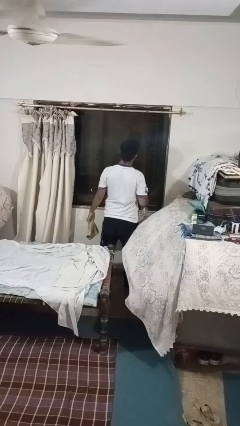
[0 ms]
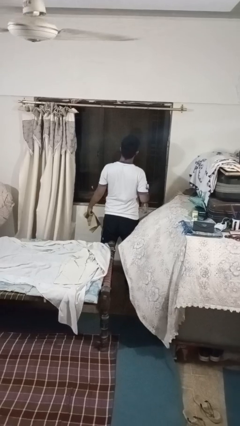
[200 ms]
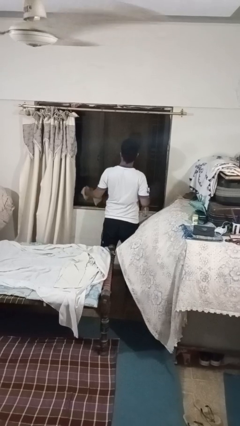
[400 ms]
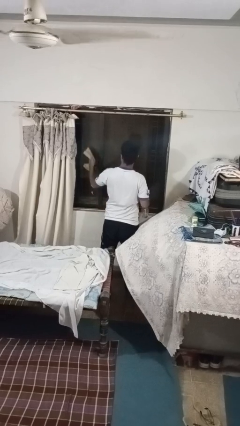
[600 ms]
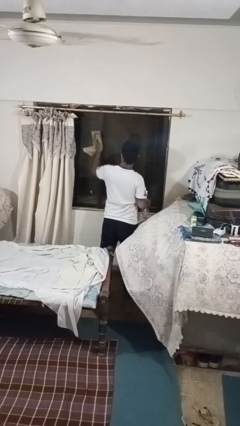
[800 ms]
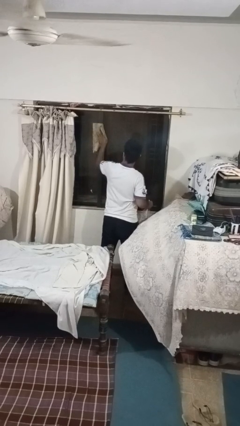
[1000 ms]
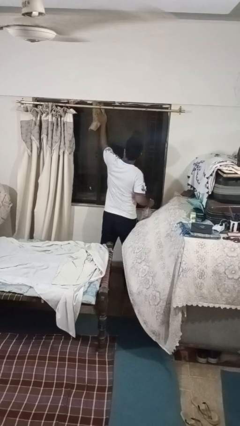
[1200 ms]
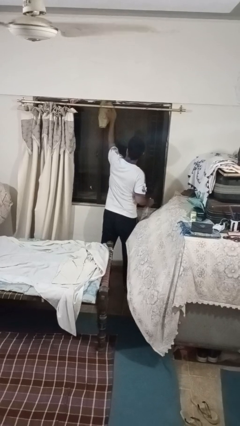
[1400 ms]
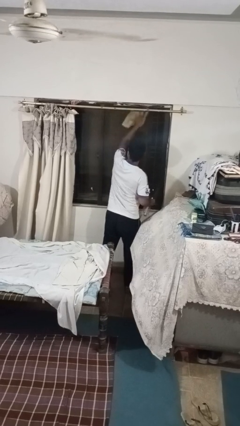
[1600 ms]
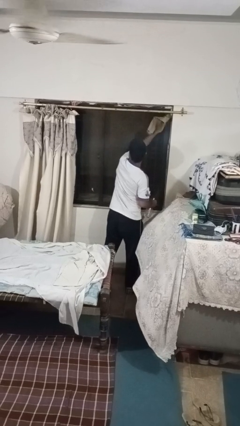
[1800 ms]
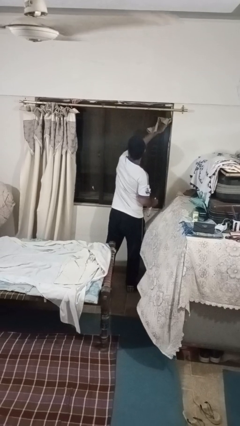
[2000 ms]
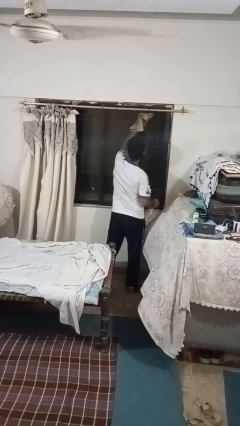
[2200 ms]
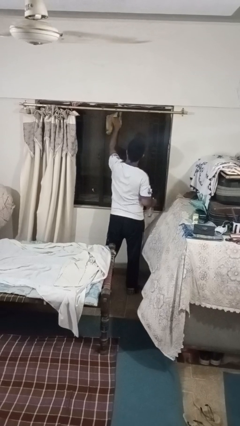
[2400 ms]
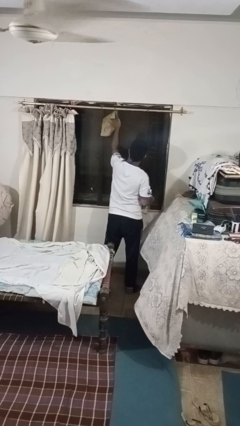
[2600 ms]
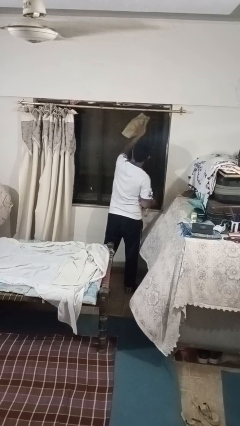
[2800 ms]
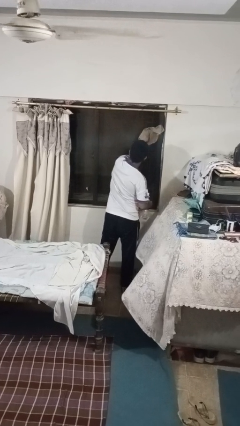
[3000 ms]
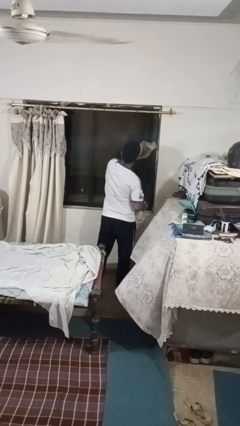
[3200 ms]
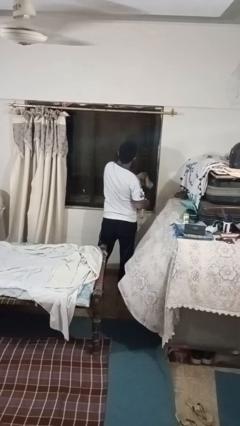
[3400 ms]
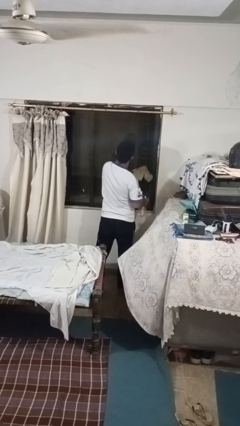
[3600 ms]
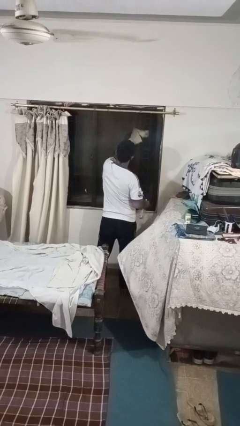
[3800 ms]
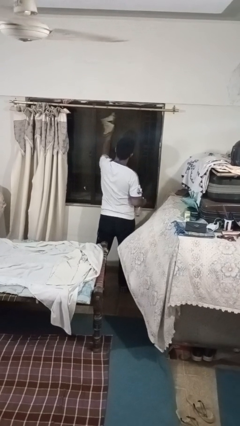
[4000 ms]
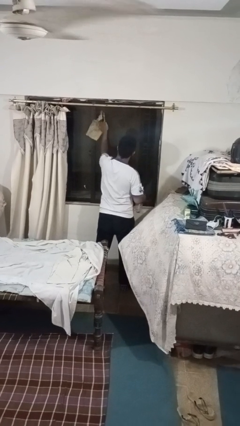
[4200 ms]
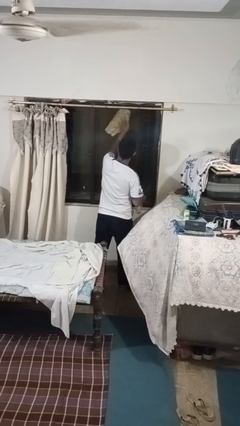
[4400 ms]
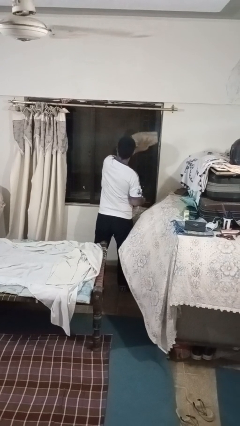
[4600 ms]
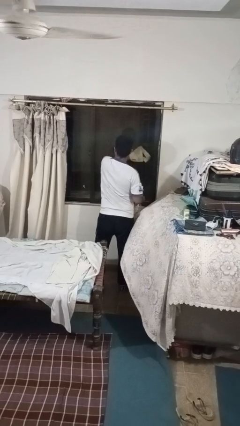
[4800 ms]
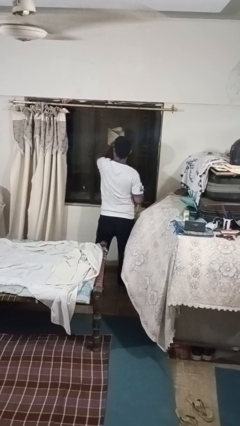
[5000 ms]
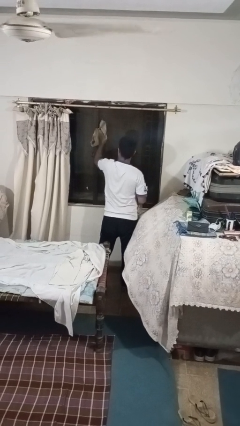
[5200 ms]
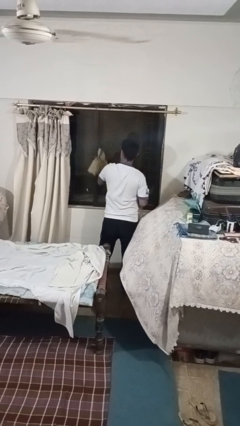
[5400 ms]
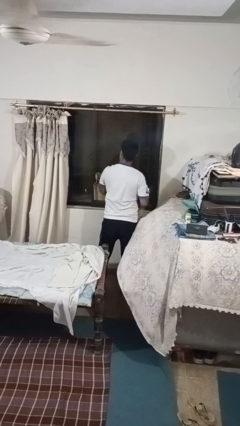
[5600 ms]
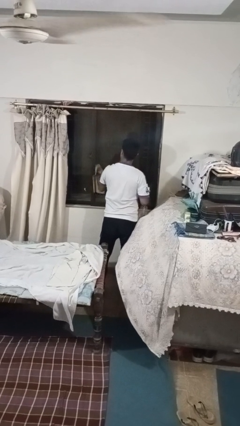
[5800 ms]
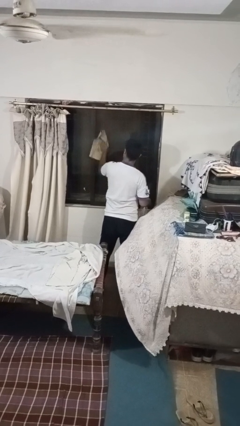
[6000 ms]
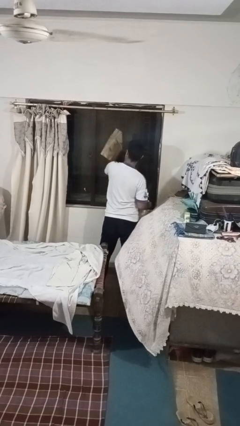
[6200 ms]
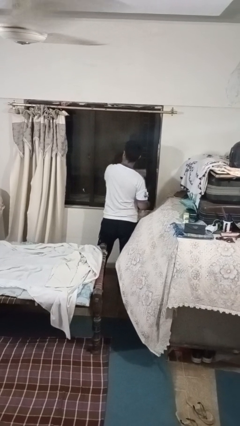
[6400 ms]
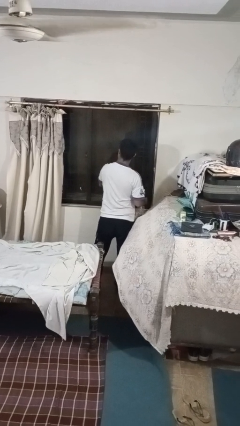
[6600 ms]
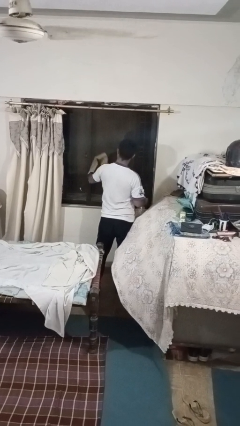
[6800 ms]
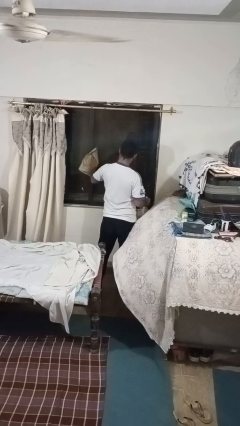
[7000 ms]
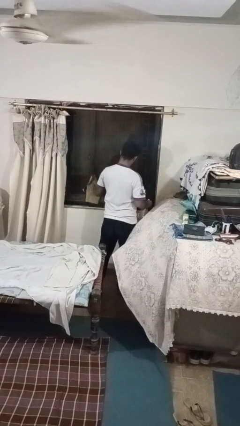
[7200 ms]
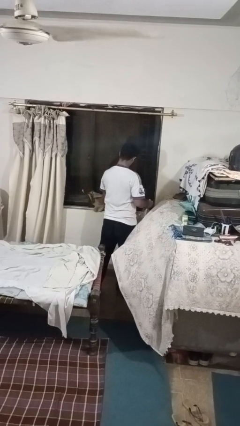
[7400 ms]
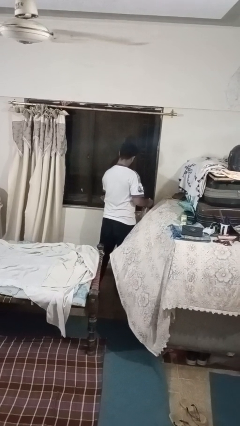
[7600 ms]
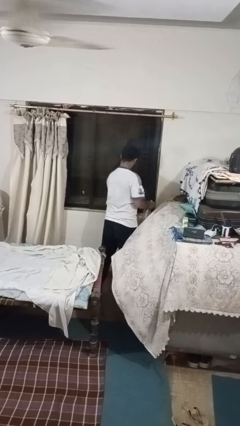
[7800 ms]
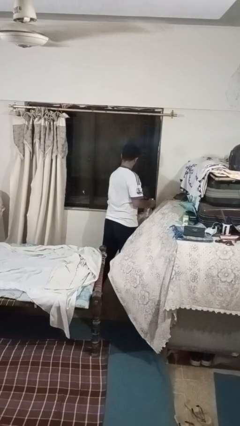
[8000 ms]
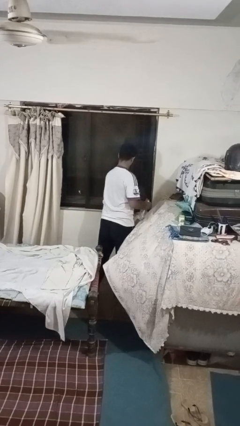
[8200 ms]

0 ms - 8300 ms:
person washes window

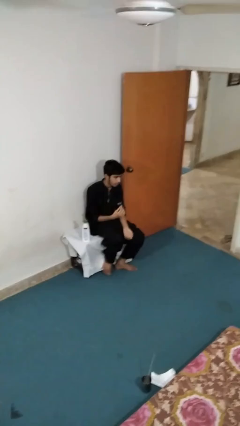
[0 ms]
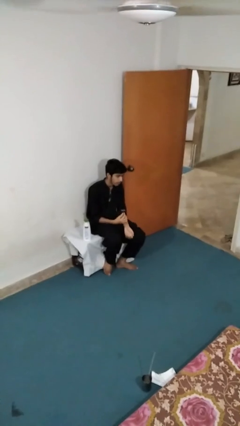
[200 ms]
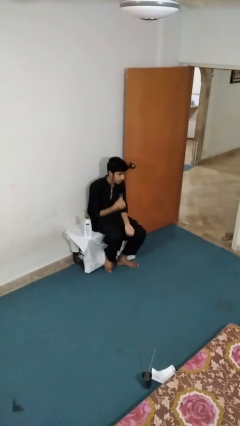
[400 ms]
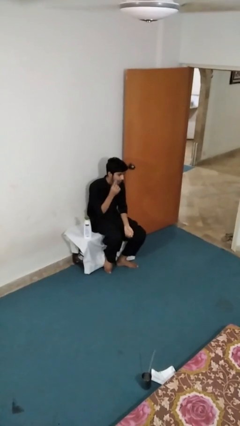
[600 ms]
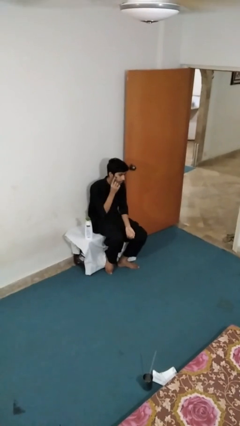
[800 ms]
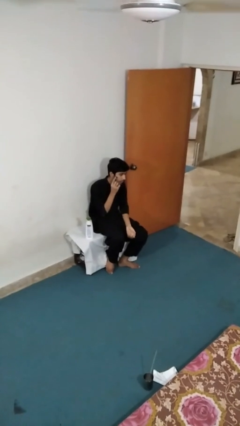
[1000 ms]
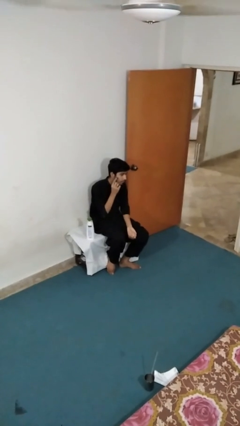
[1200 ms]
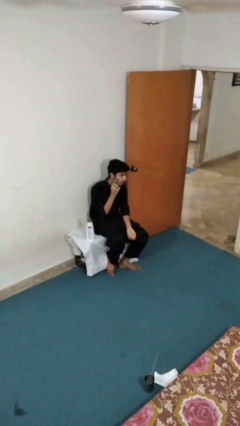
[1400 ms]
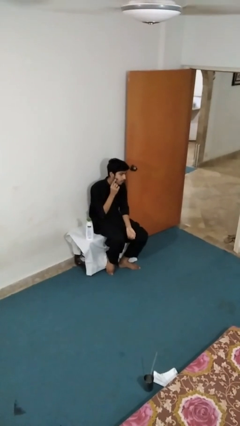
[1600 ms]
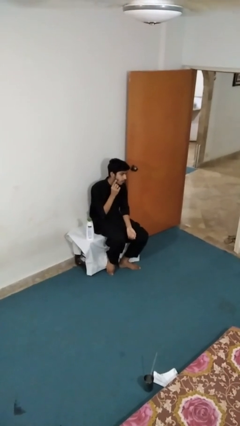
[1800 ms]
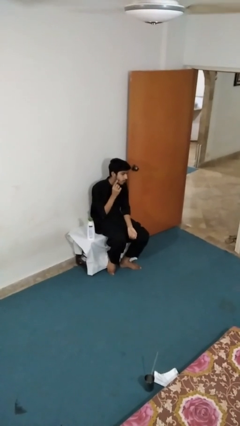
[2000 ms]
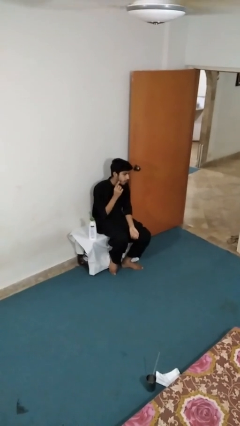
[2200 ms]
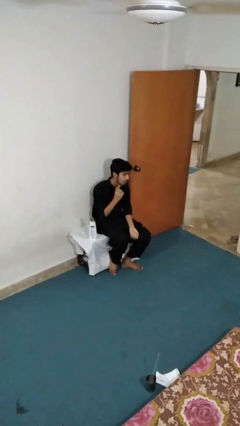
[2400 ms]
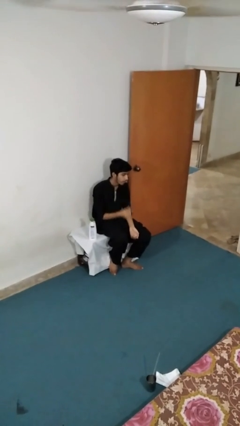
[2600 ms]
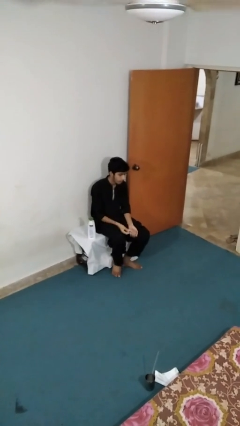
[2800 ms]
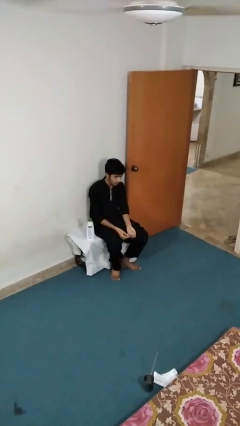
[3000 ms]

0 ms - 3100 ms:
person shaves face

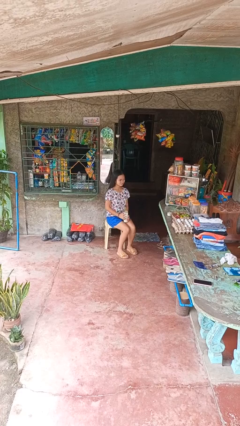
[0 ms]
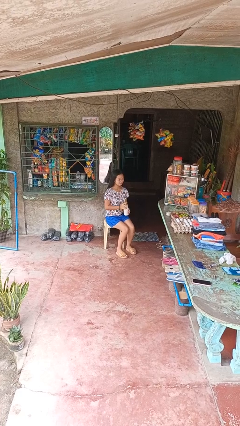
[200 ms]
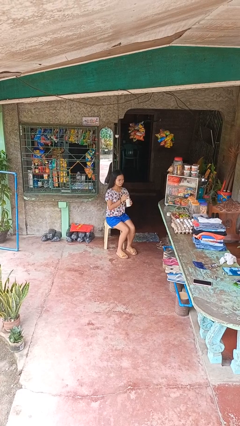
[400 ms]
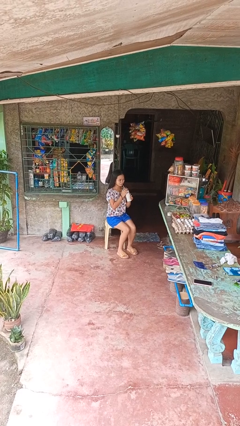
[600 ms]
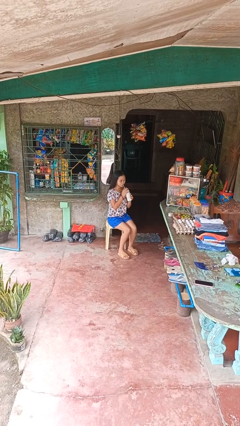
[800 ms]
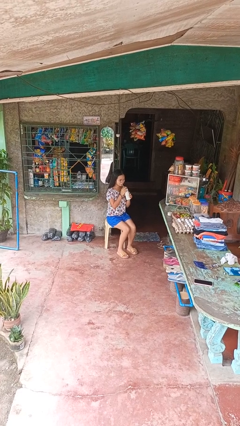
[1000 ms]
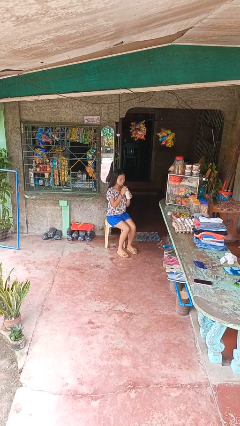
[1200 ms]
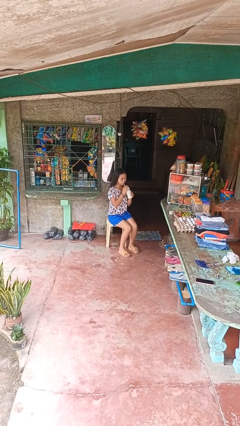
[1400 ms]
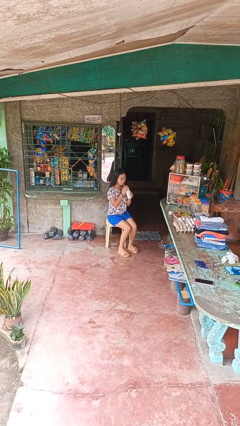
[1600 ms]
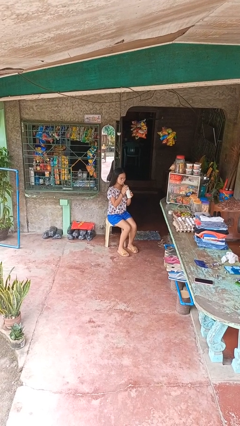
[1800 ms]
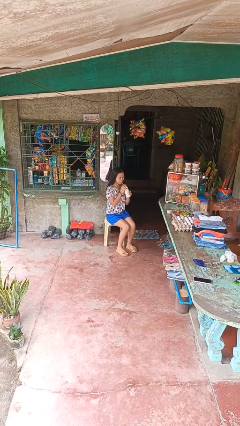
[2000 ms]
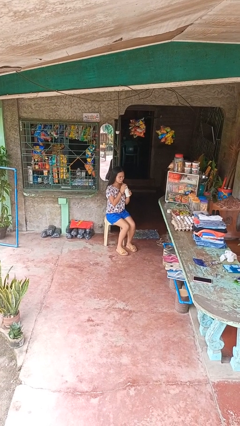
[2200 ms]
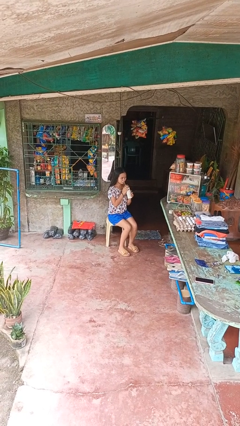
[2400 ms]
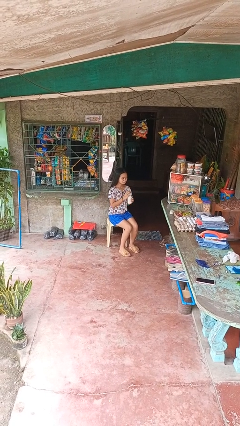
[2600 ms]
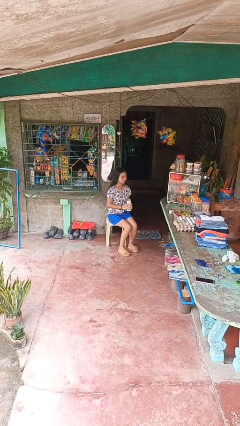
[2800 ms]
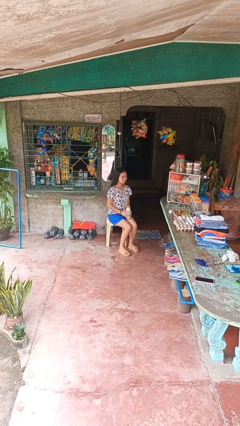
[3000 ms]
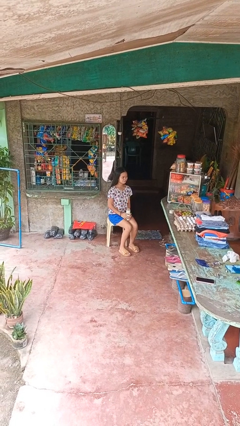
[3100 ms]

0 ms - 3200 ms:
person drinks from straw

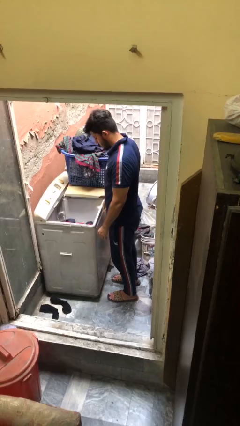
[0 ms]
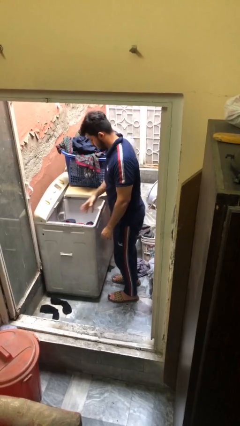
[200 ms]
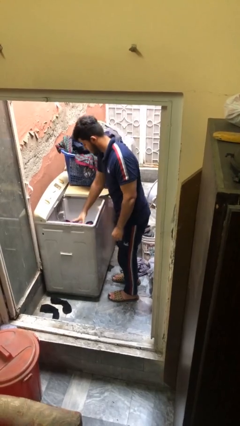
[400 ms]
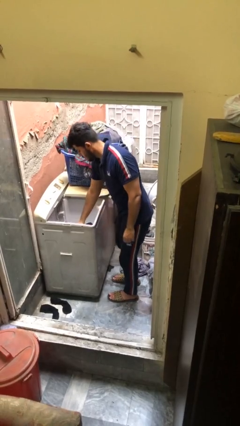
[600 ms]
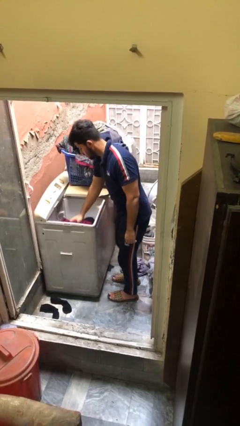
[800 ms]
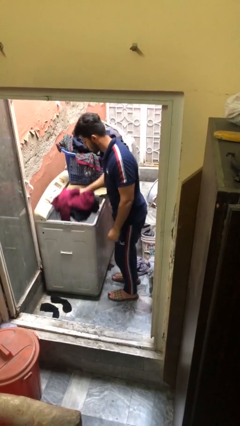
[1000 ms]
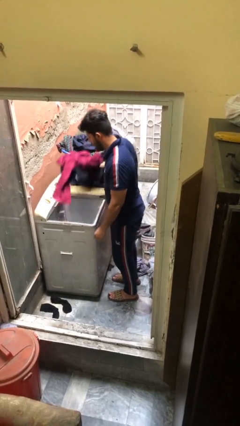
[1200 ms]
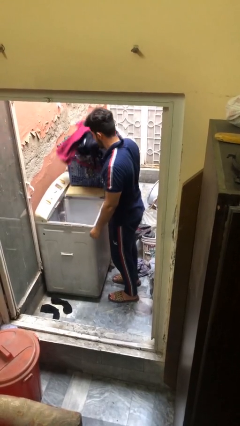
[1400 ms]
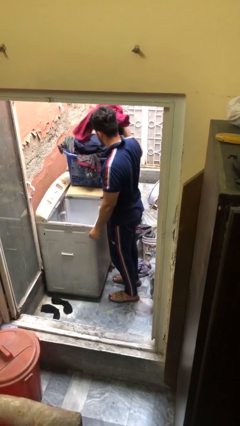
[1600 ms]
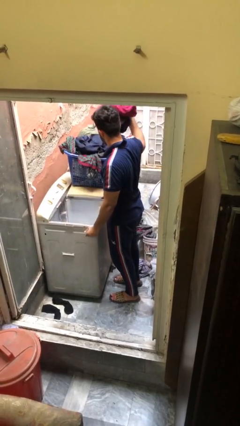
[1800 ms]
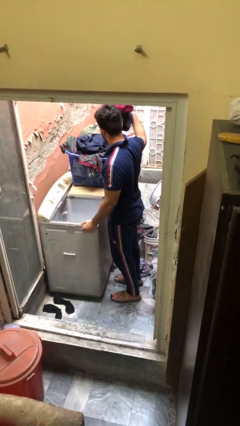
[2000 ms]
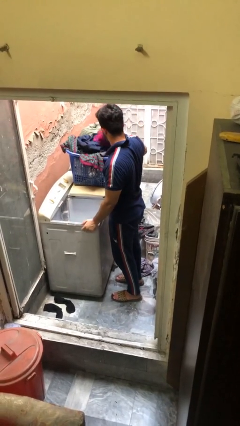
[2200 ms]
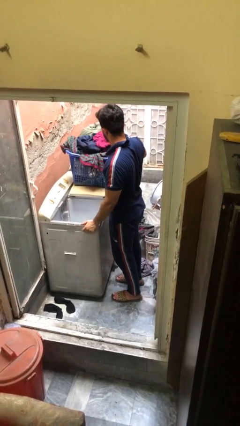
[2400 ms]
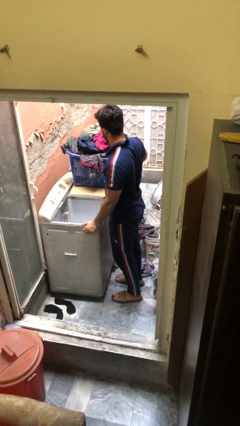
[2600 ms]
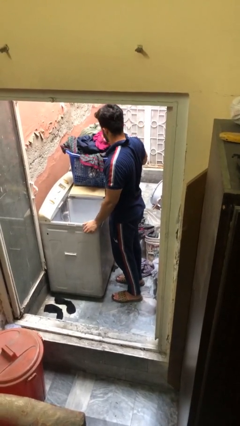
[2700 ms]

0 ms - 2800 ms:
person loads clotheswasher

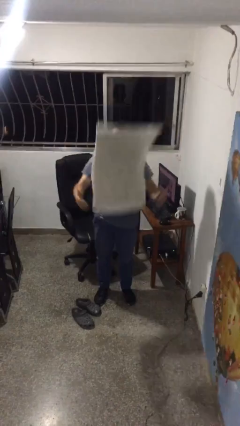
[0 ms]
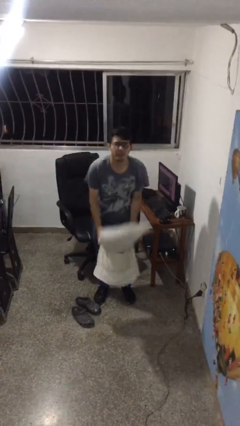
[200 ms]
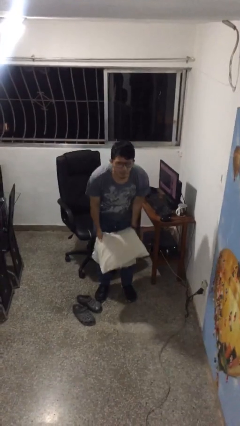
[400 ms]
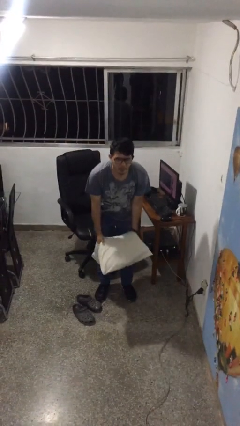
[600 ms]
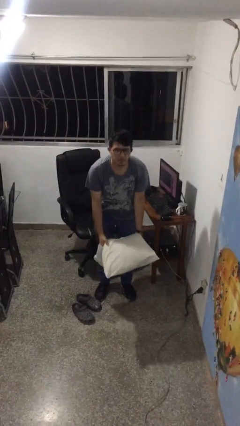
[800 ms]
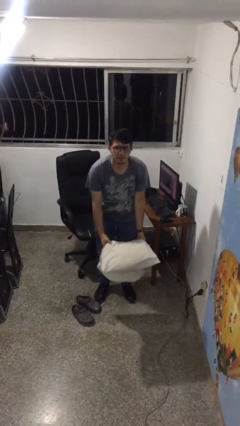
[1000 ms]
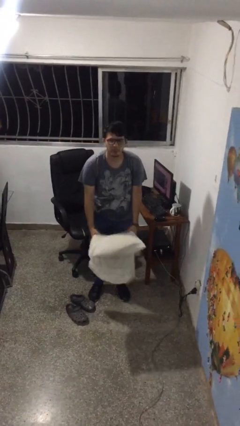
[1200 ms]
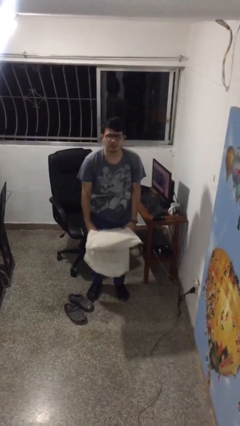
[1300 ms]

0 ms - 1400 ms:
person catches dropped object
